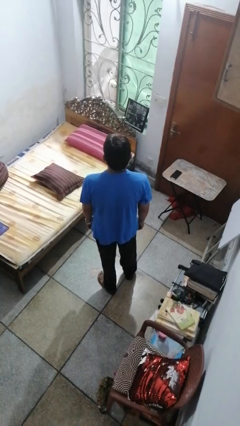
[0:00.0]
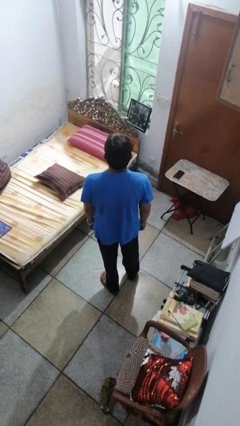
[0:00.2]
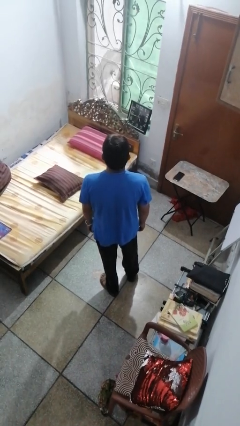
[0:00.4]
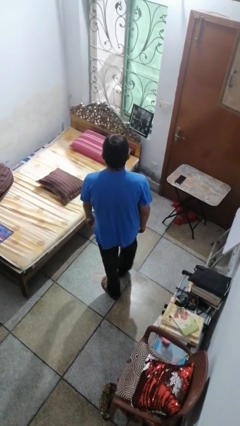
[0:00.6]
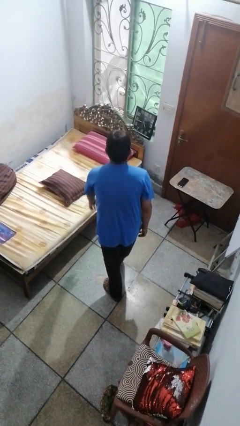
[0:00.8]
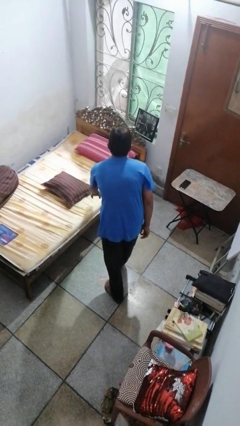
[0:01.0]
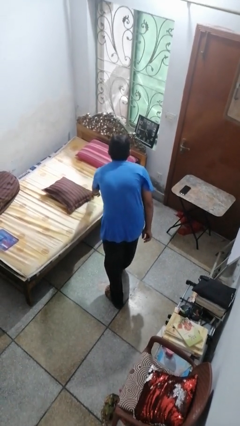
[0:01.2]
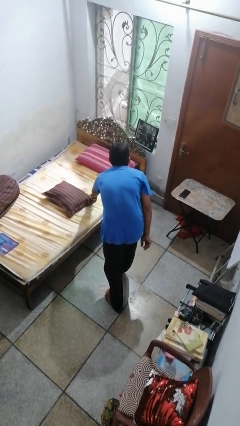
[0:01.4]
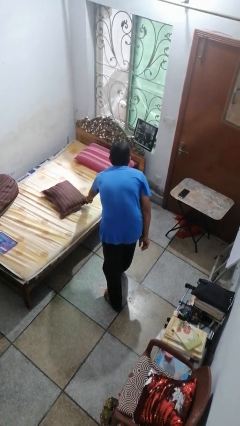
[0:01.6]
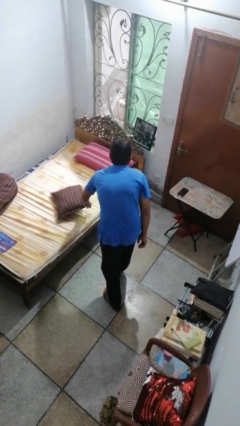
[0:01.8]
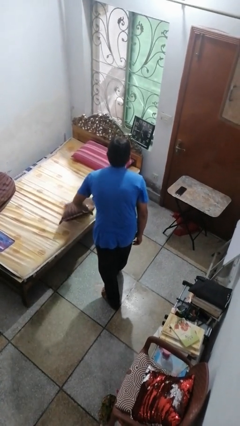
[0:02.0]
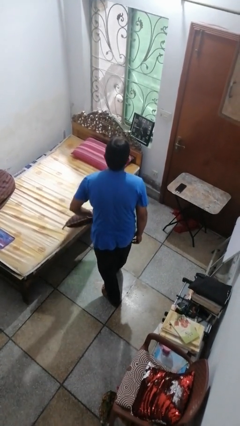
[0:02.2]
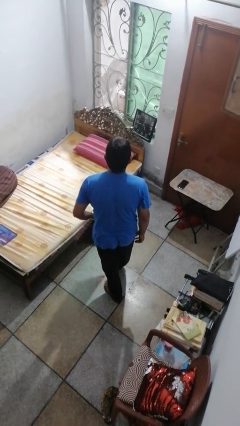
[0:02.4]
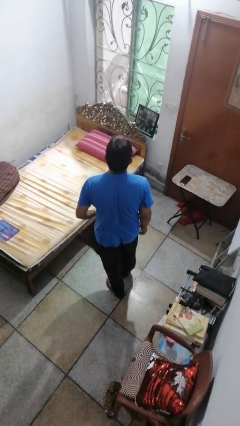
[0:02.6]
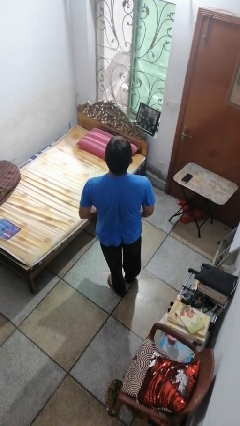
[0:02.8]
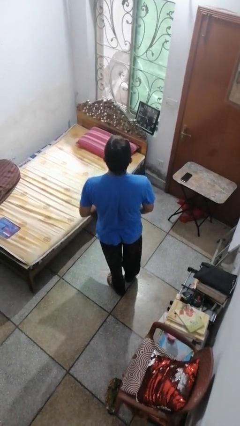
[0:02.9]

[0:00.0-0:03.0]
person picks up object from bed

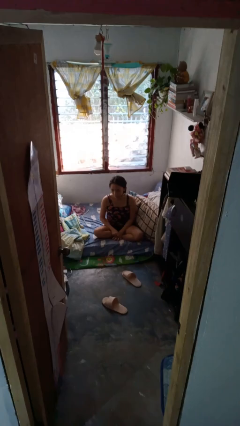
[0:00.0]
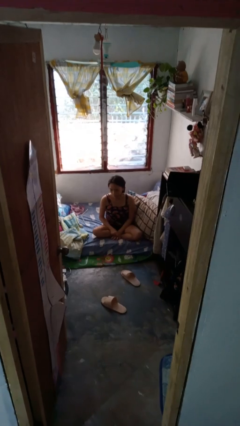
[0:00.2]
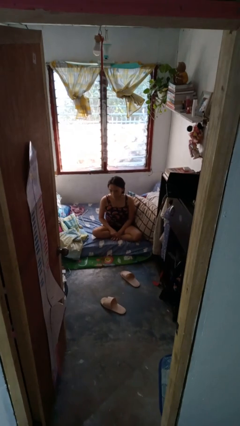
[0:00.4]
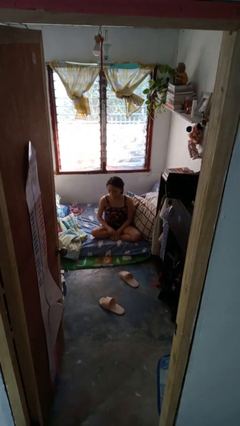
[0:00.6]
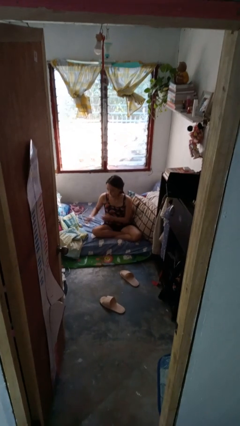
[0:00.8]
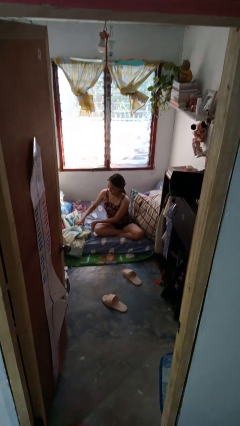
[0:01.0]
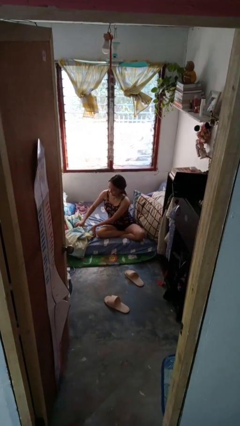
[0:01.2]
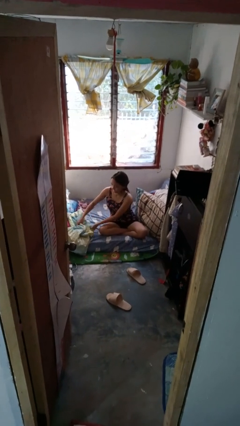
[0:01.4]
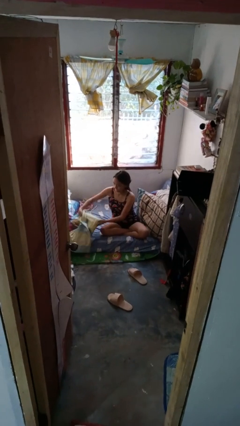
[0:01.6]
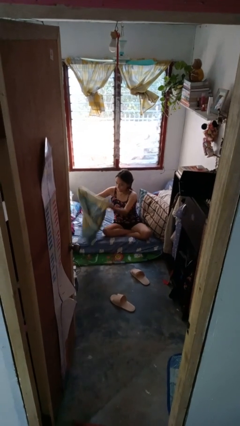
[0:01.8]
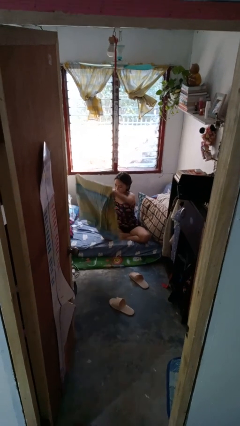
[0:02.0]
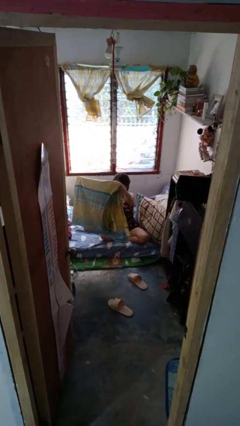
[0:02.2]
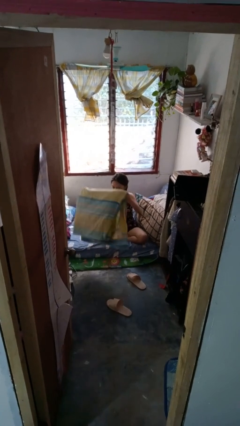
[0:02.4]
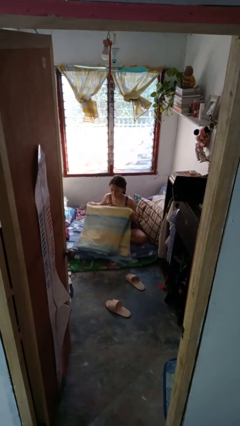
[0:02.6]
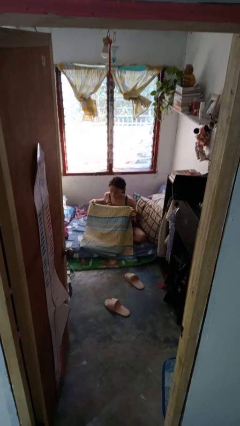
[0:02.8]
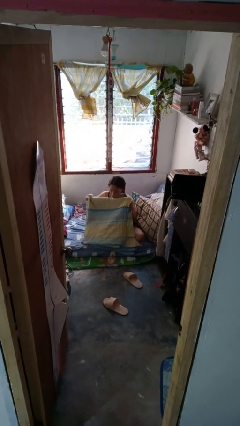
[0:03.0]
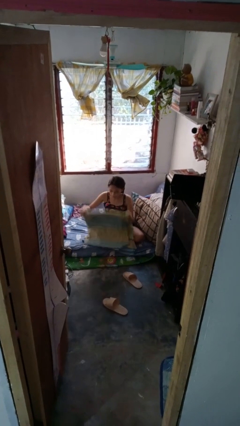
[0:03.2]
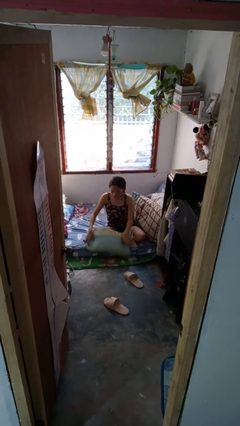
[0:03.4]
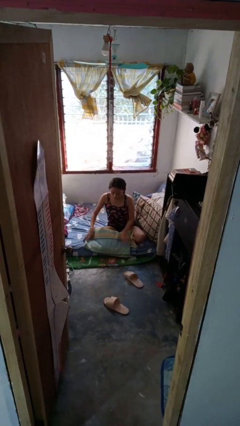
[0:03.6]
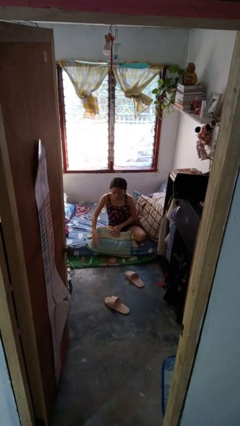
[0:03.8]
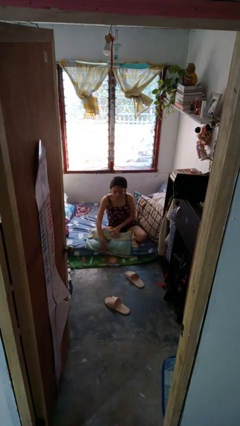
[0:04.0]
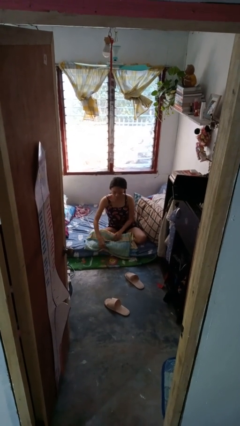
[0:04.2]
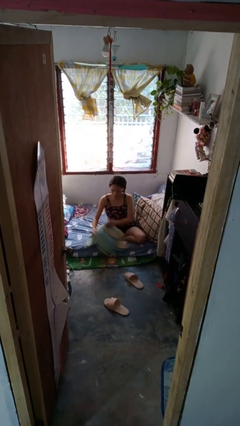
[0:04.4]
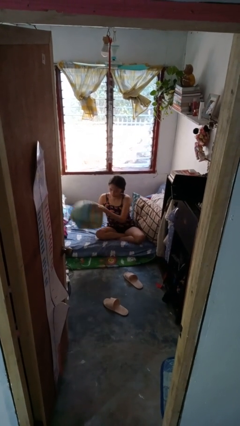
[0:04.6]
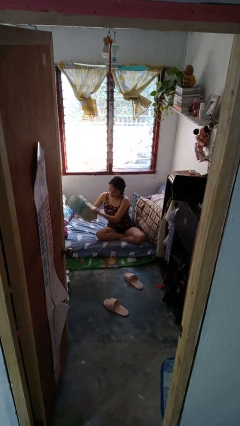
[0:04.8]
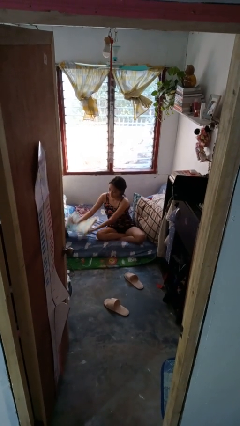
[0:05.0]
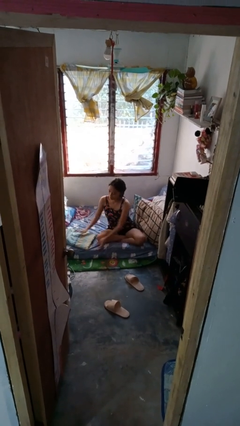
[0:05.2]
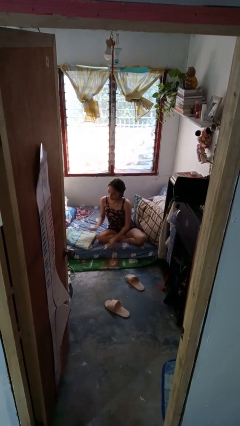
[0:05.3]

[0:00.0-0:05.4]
person folds blanket

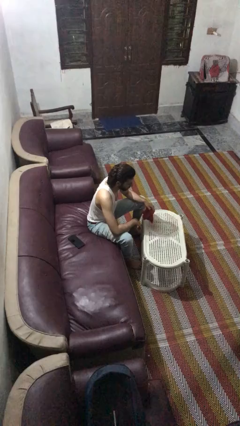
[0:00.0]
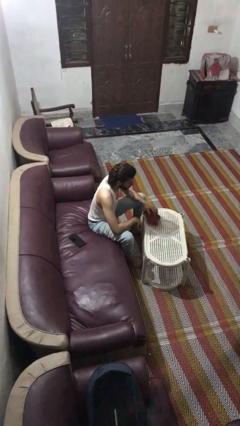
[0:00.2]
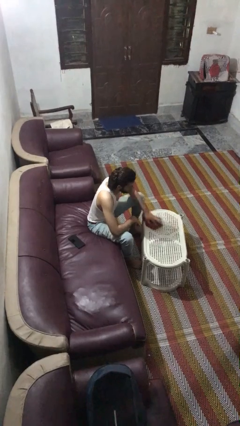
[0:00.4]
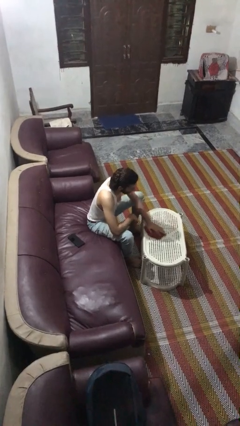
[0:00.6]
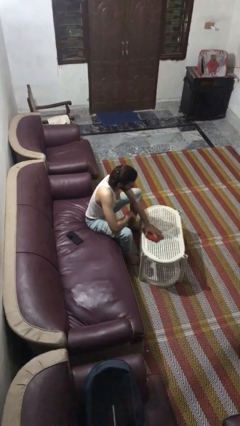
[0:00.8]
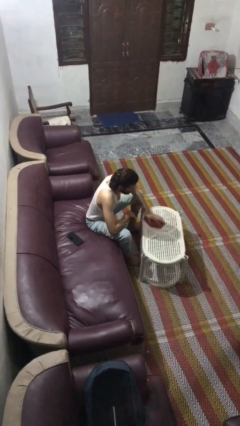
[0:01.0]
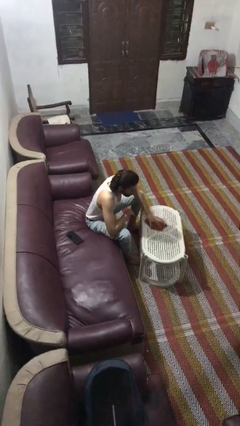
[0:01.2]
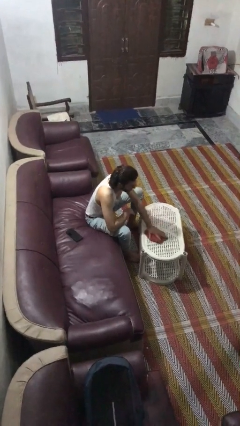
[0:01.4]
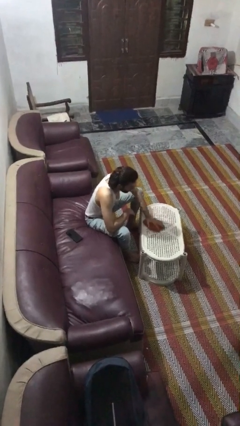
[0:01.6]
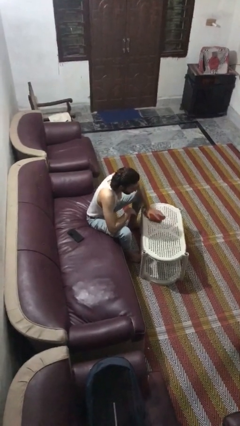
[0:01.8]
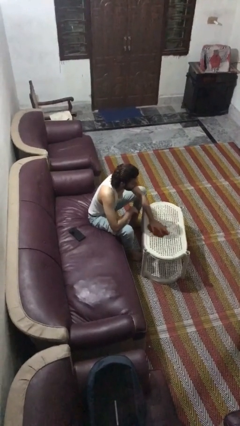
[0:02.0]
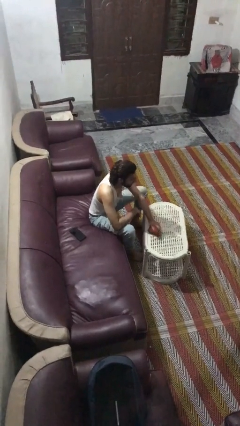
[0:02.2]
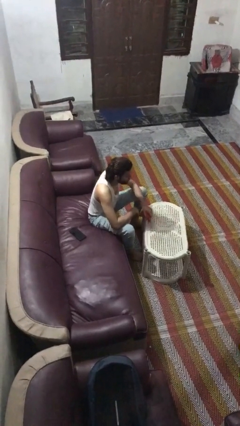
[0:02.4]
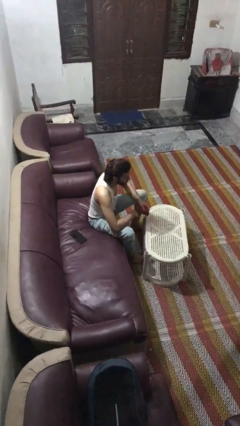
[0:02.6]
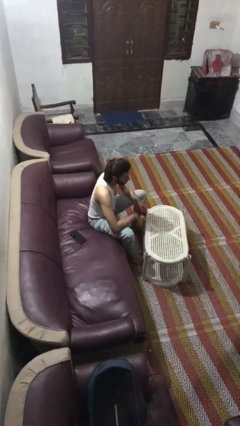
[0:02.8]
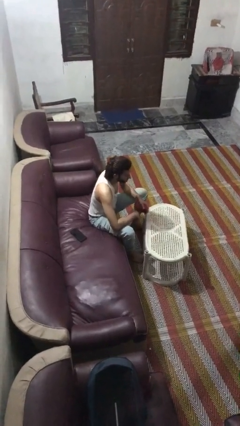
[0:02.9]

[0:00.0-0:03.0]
person cleans table with rag

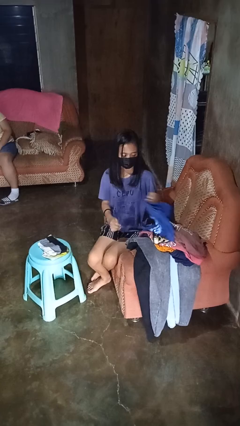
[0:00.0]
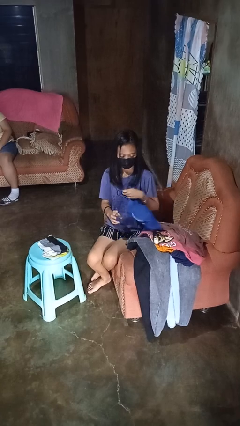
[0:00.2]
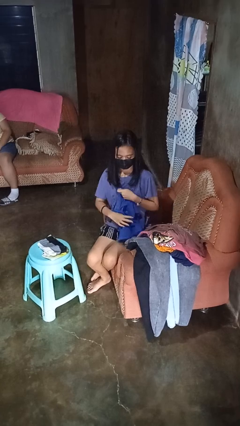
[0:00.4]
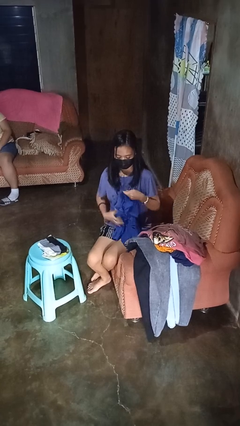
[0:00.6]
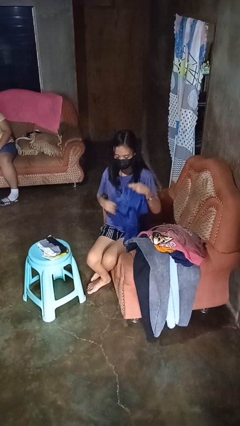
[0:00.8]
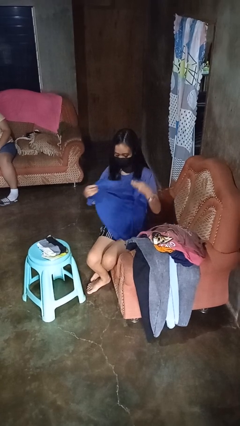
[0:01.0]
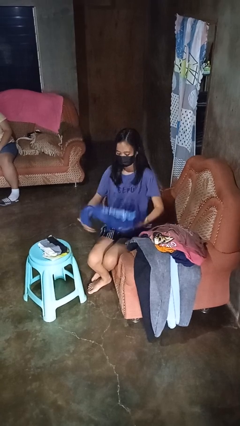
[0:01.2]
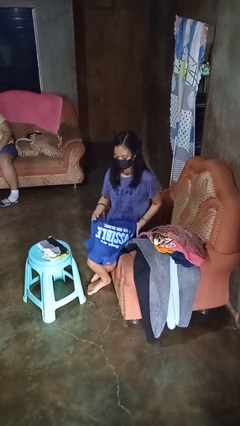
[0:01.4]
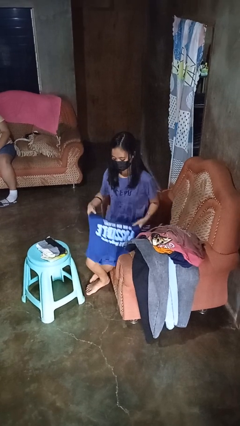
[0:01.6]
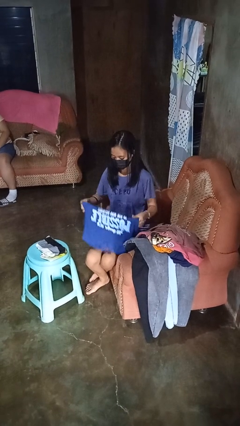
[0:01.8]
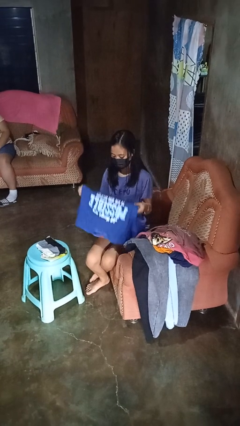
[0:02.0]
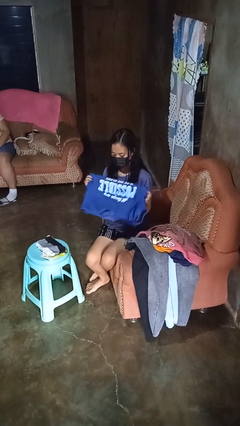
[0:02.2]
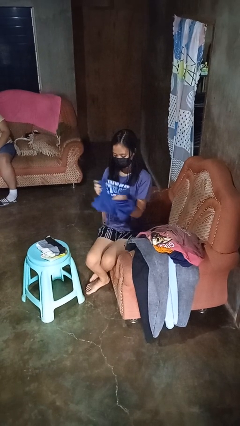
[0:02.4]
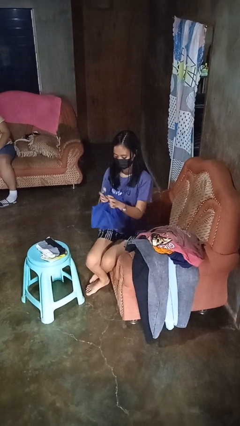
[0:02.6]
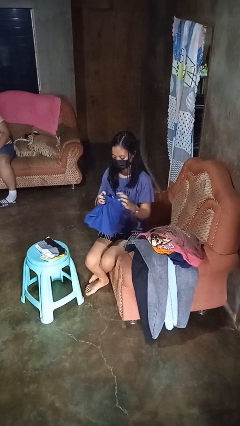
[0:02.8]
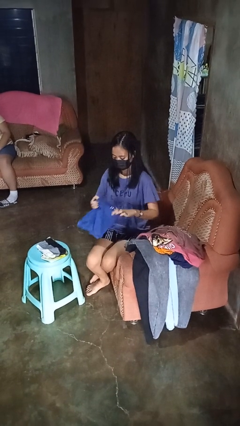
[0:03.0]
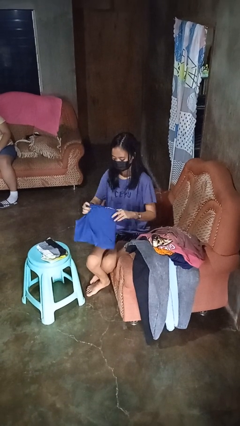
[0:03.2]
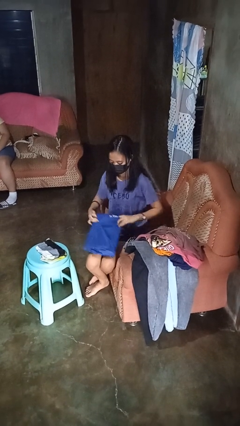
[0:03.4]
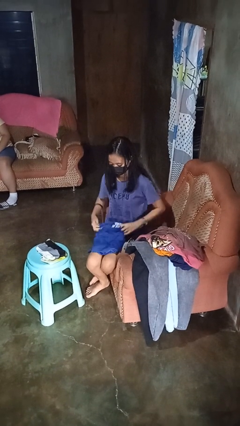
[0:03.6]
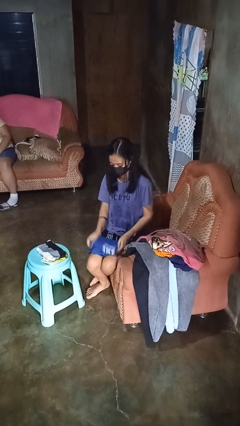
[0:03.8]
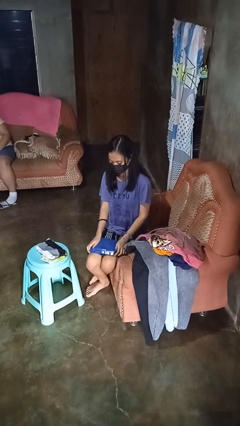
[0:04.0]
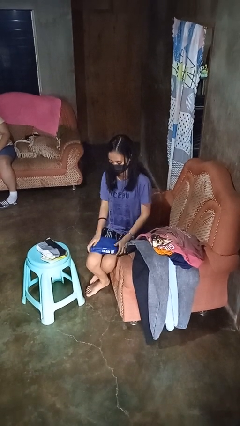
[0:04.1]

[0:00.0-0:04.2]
person folds shirt

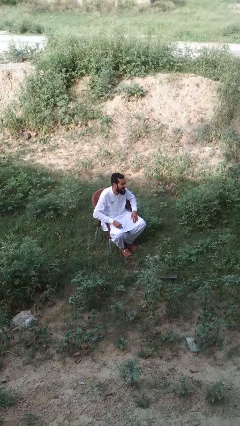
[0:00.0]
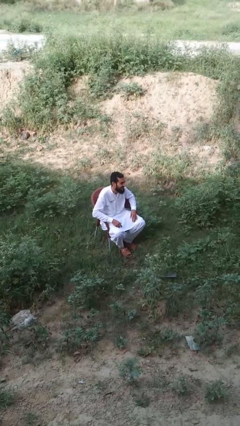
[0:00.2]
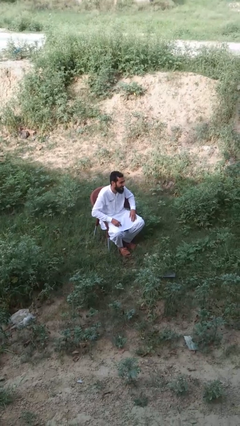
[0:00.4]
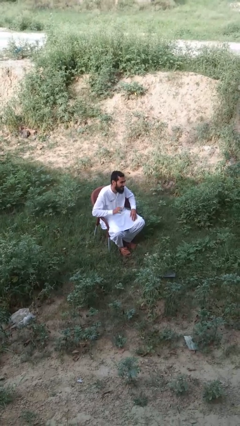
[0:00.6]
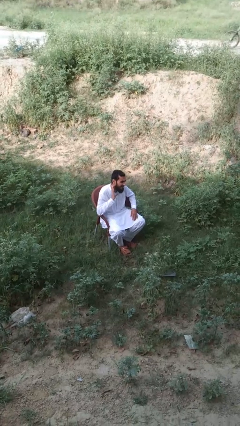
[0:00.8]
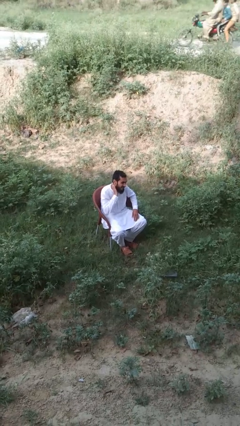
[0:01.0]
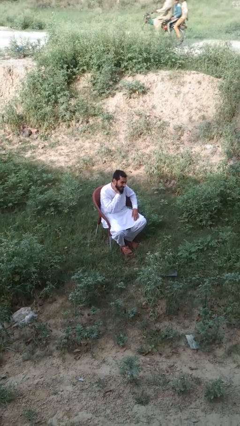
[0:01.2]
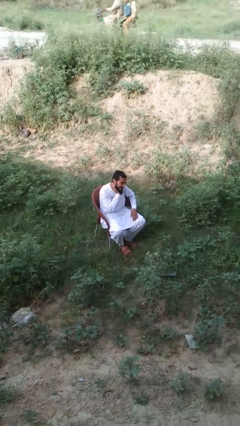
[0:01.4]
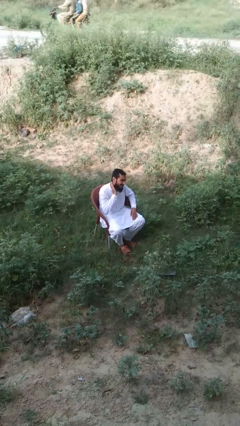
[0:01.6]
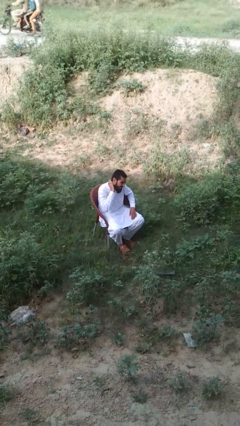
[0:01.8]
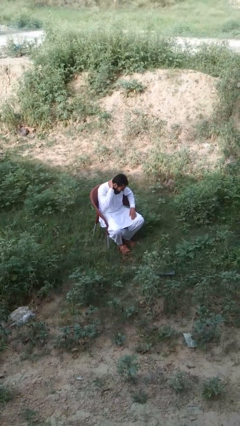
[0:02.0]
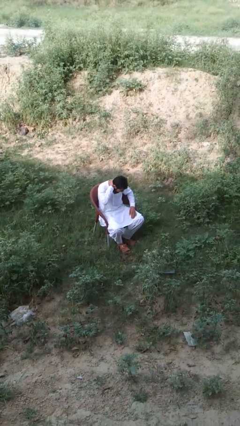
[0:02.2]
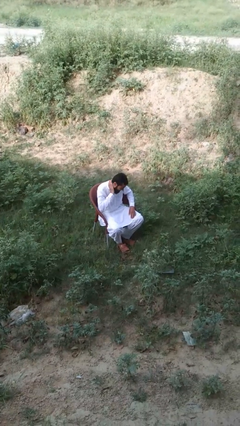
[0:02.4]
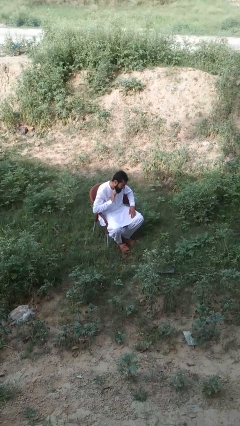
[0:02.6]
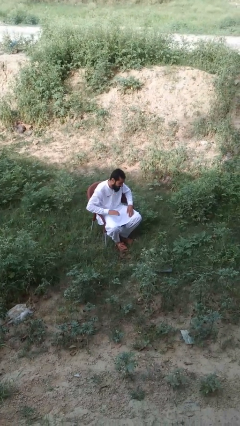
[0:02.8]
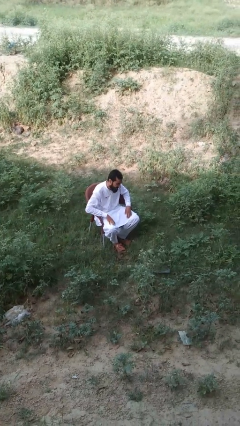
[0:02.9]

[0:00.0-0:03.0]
person rubs neck
